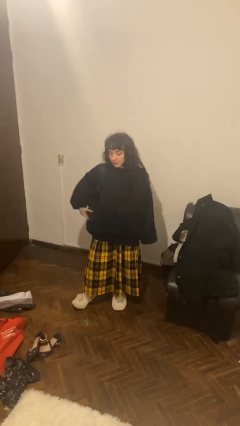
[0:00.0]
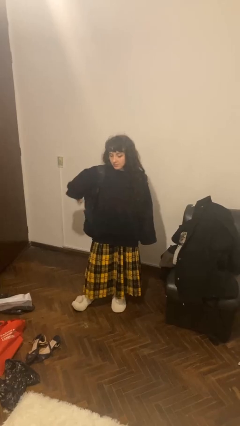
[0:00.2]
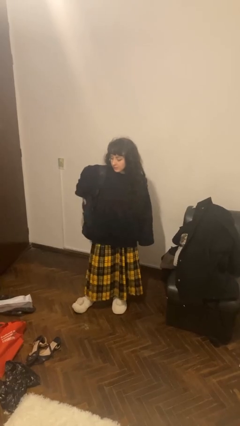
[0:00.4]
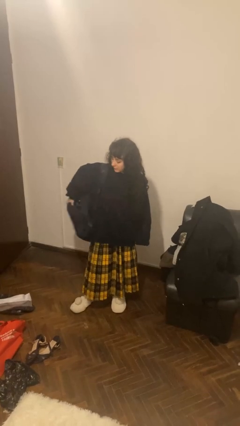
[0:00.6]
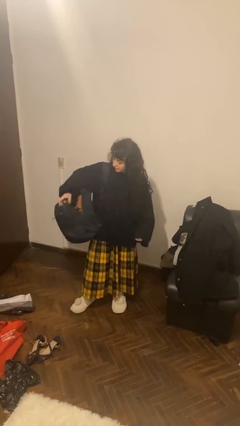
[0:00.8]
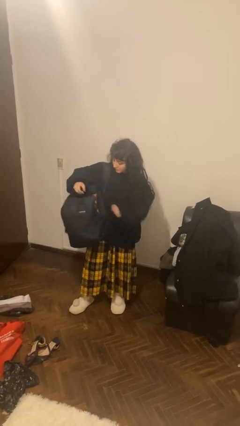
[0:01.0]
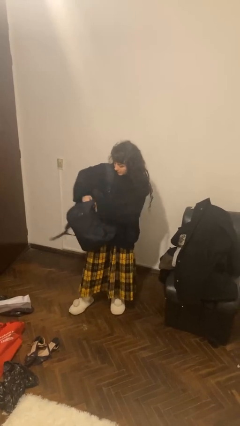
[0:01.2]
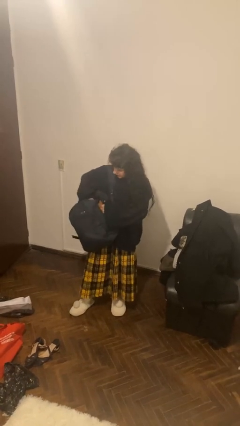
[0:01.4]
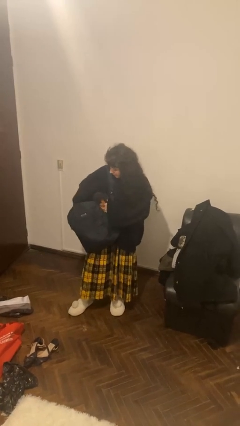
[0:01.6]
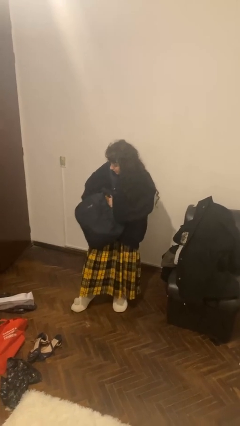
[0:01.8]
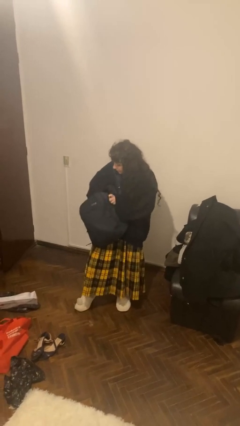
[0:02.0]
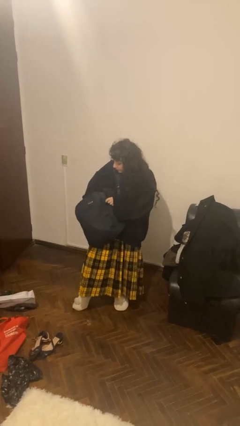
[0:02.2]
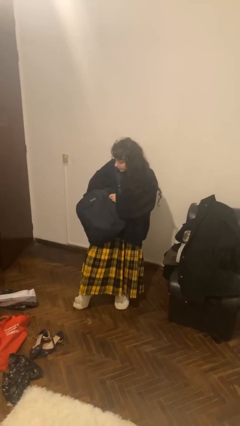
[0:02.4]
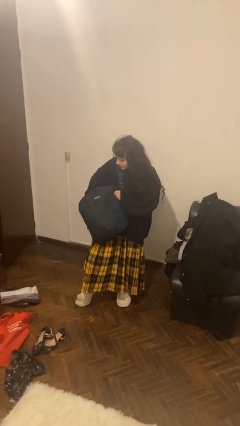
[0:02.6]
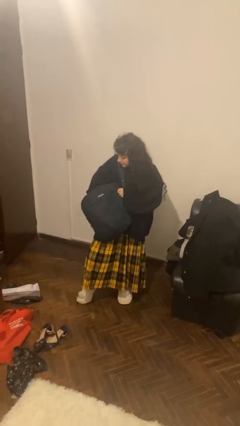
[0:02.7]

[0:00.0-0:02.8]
person searches in backpack

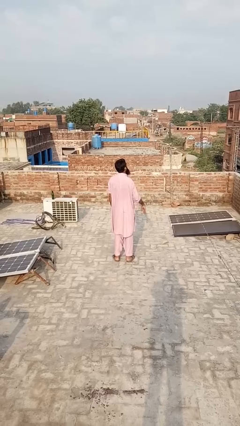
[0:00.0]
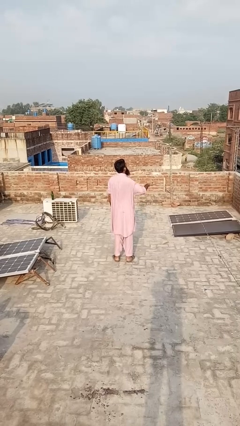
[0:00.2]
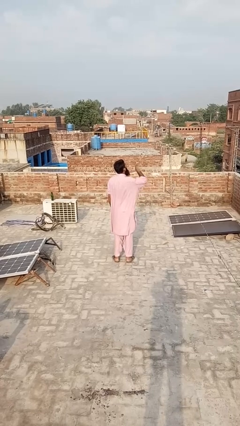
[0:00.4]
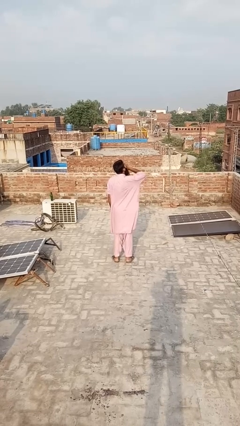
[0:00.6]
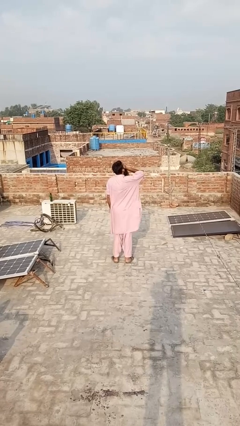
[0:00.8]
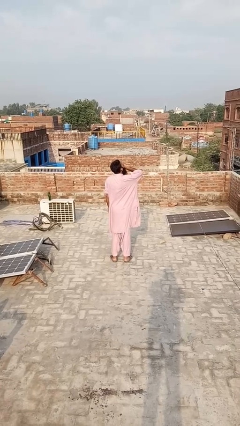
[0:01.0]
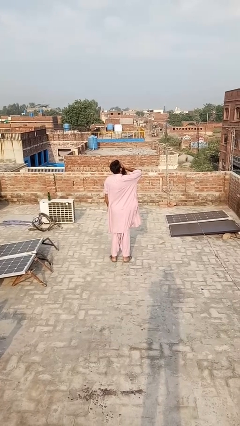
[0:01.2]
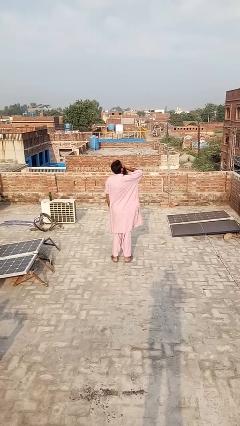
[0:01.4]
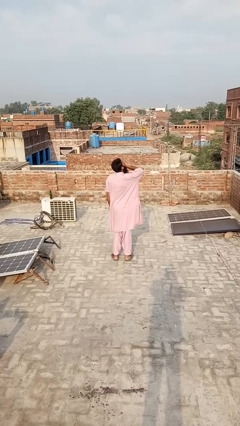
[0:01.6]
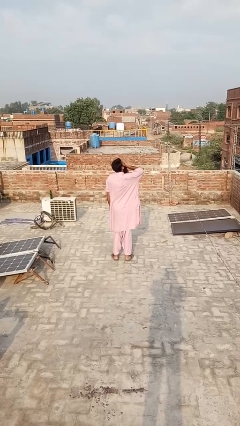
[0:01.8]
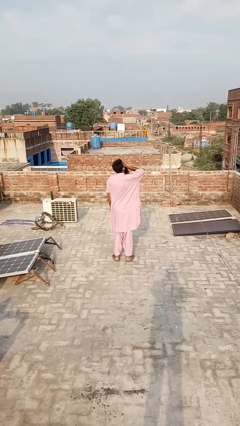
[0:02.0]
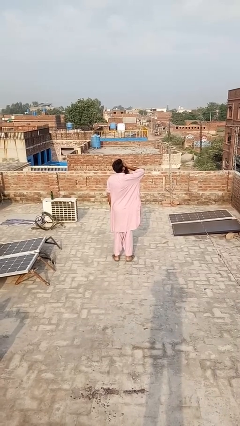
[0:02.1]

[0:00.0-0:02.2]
person yawns

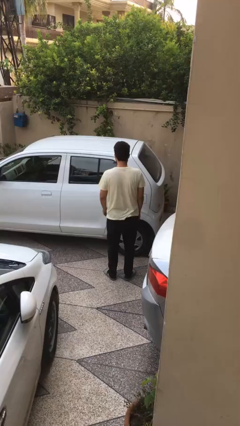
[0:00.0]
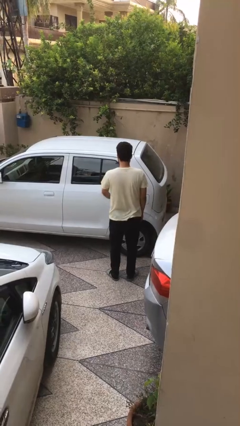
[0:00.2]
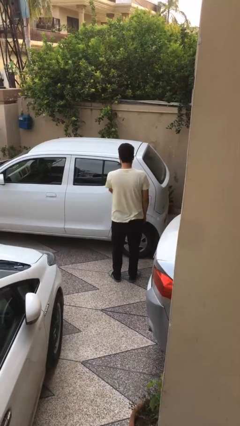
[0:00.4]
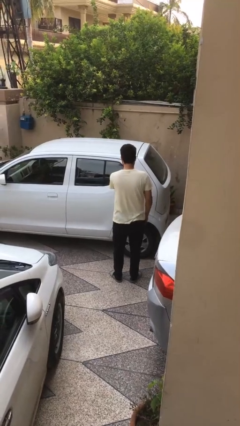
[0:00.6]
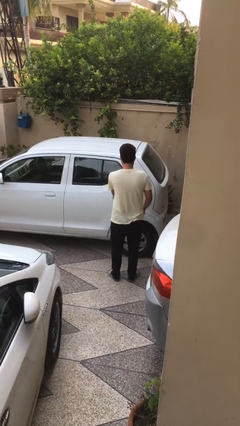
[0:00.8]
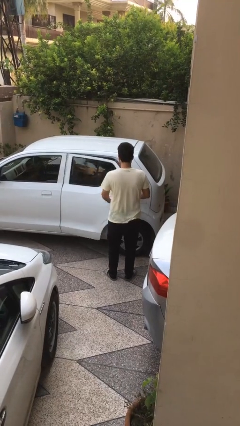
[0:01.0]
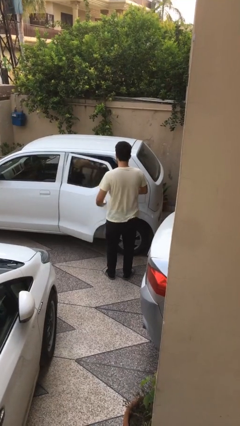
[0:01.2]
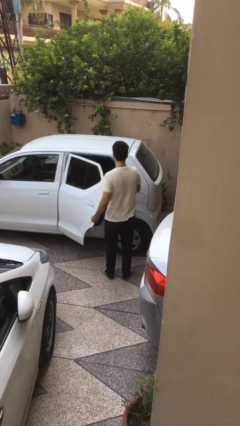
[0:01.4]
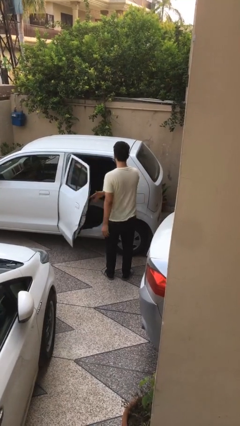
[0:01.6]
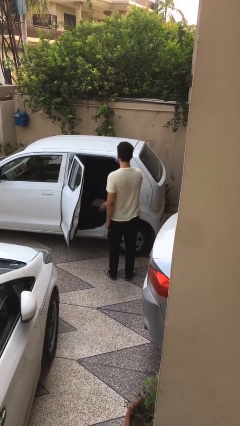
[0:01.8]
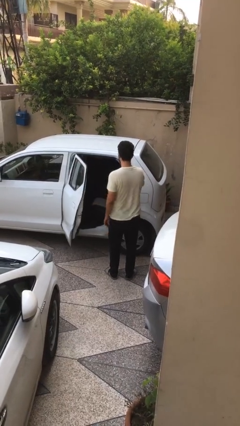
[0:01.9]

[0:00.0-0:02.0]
person opens car door

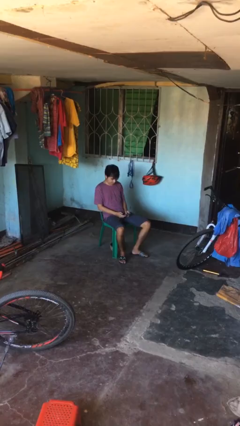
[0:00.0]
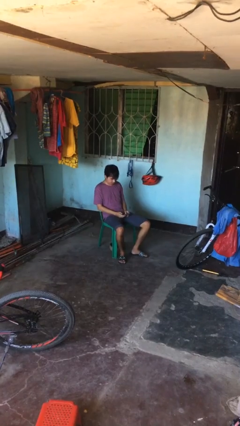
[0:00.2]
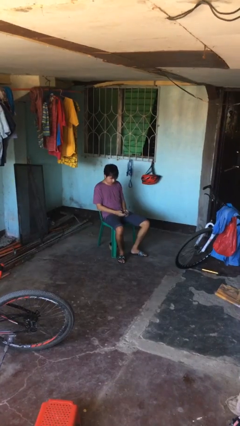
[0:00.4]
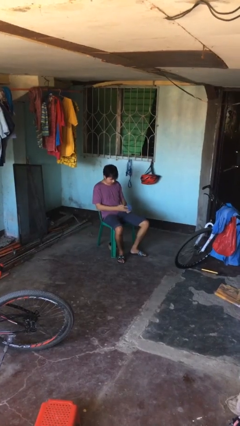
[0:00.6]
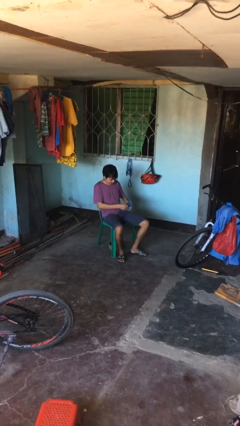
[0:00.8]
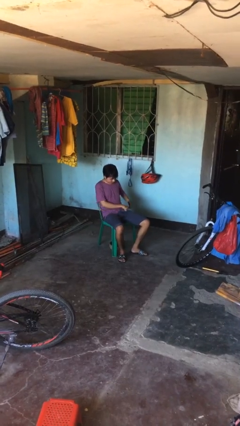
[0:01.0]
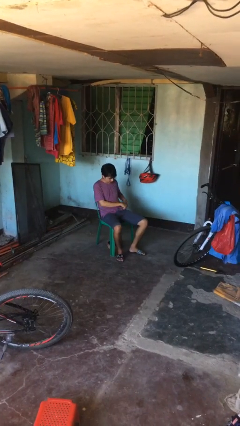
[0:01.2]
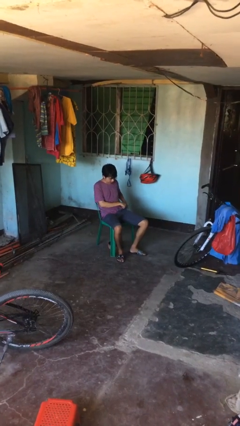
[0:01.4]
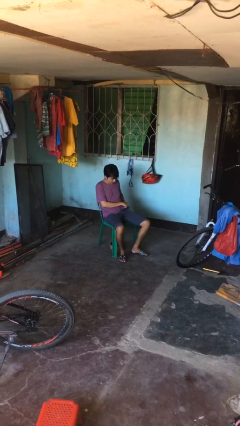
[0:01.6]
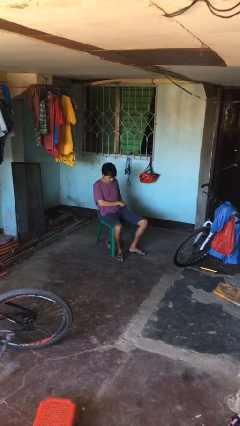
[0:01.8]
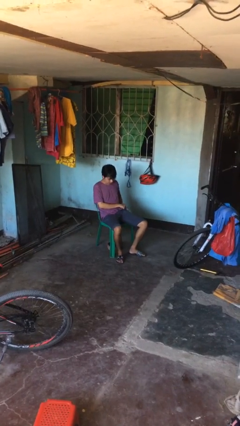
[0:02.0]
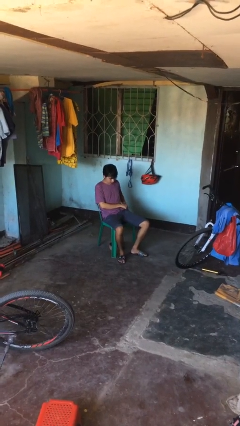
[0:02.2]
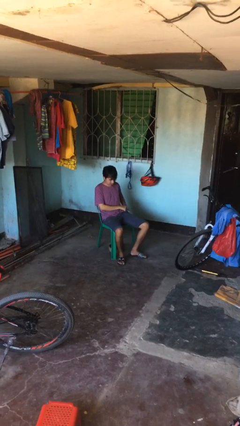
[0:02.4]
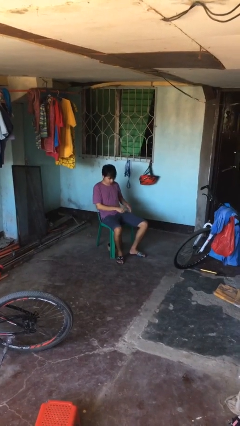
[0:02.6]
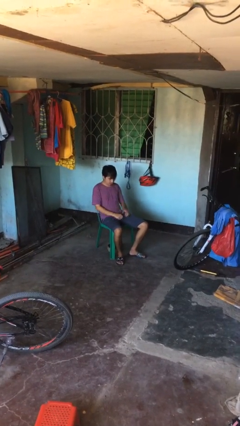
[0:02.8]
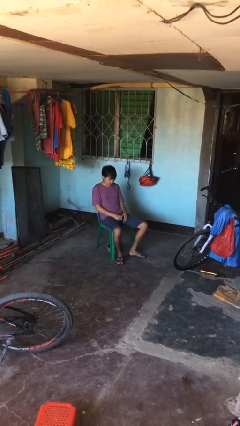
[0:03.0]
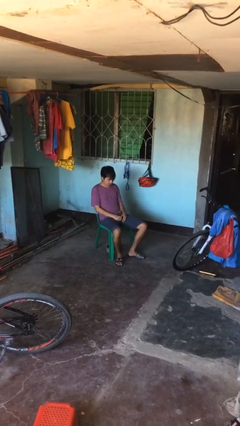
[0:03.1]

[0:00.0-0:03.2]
person puts phone into pocket

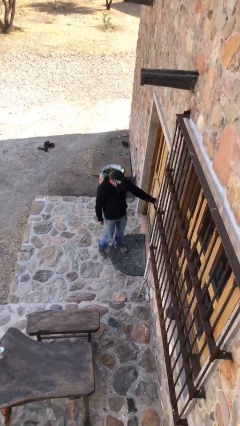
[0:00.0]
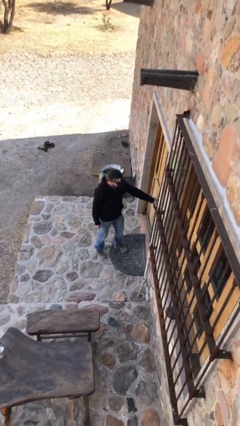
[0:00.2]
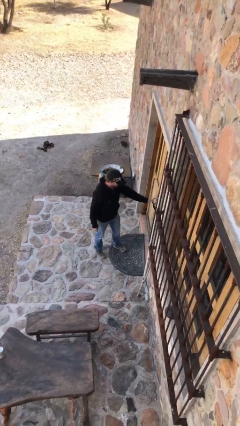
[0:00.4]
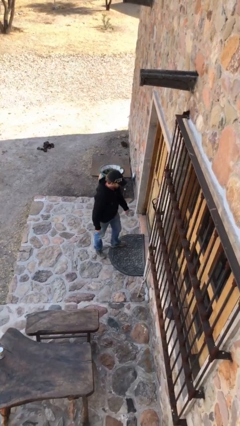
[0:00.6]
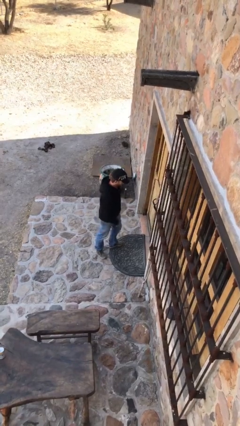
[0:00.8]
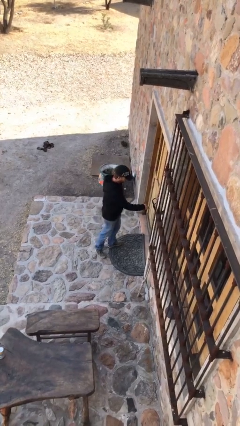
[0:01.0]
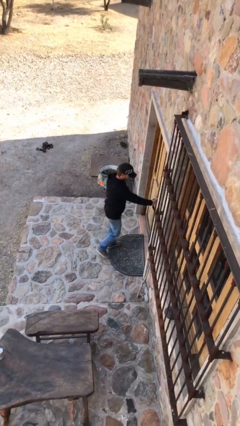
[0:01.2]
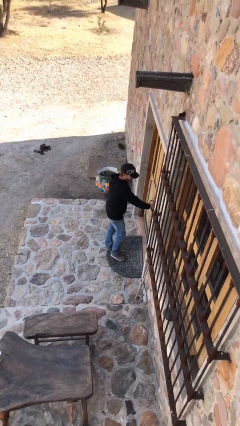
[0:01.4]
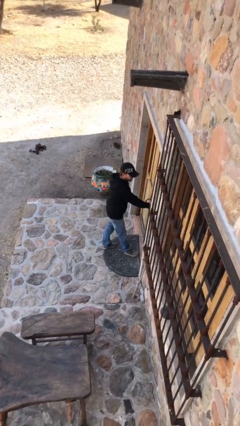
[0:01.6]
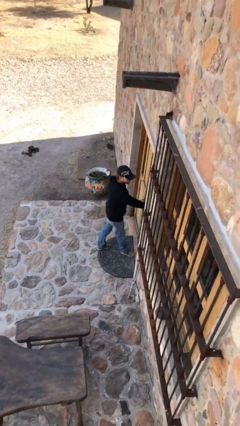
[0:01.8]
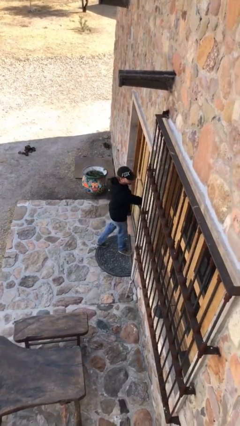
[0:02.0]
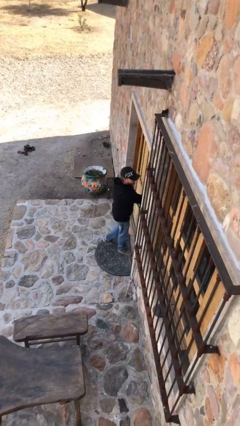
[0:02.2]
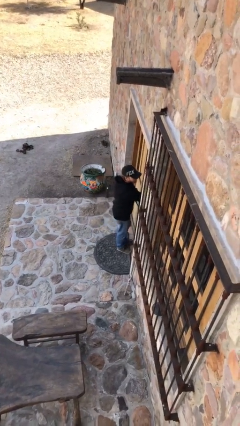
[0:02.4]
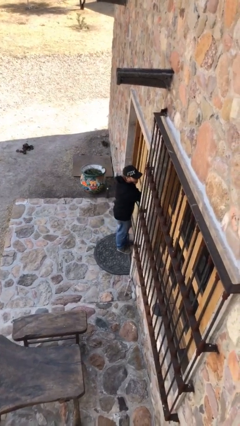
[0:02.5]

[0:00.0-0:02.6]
person opens facility door

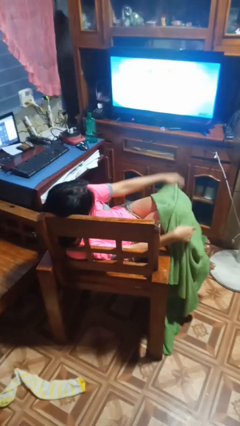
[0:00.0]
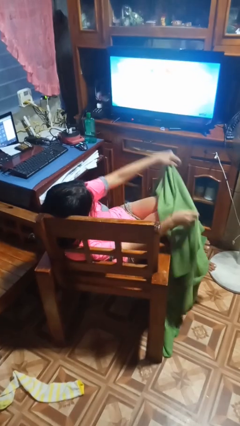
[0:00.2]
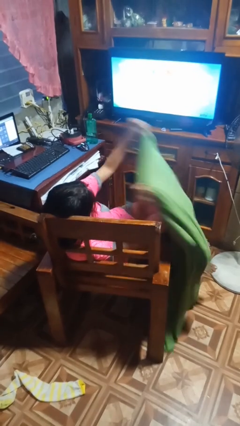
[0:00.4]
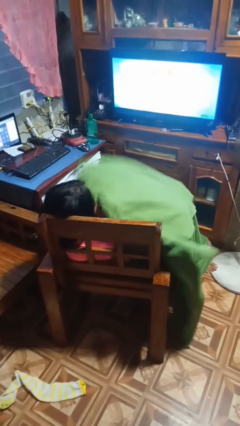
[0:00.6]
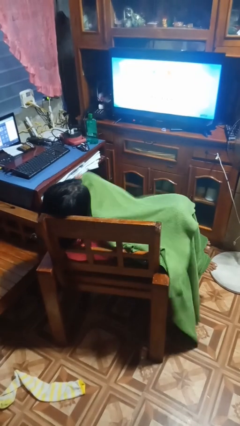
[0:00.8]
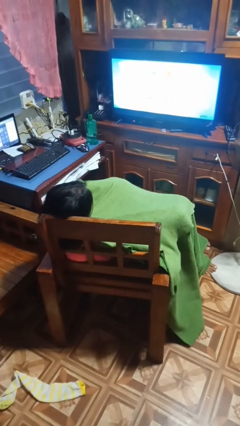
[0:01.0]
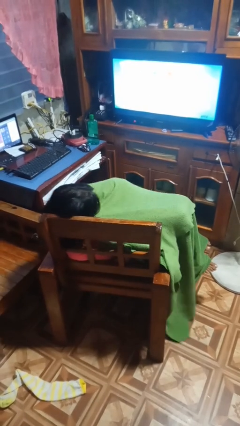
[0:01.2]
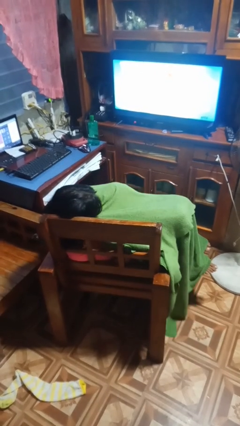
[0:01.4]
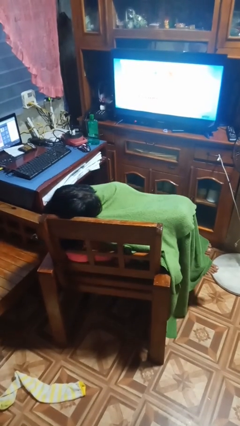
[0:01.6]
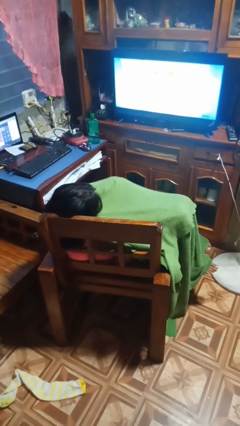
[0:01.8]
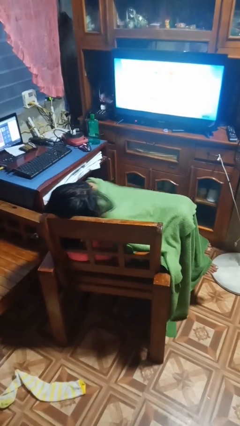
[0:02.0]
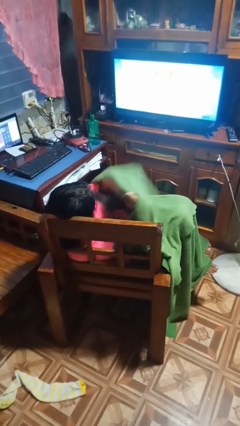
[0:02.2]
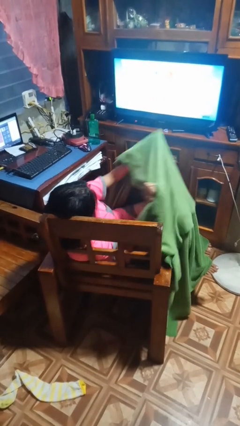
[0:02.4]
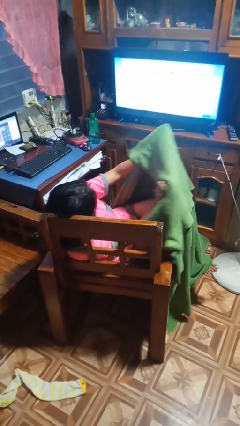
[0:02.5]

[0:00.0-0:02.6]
person covers with blanket

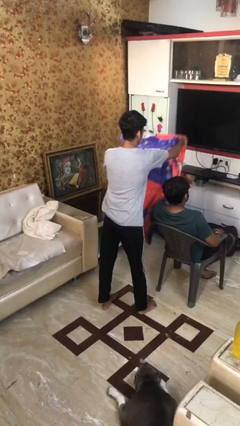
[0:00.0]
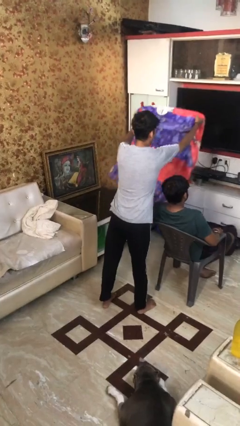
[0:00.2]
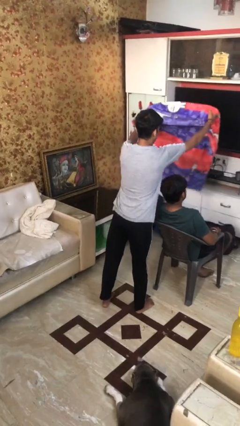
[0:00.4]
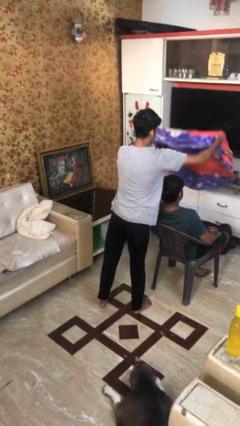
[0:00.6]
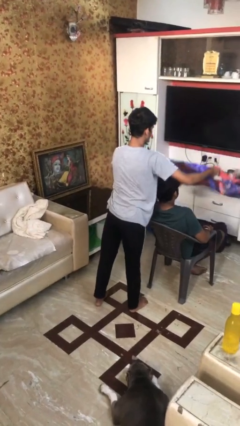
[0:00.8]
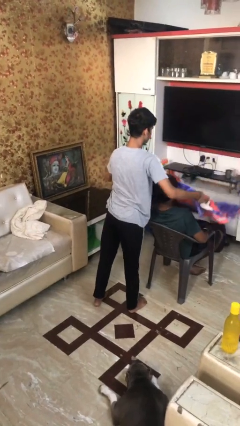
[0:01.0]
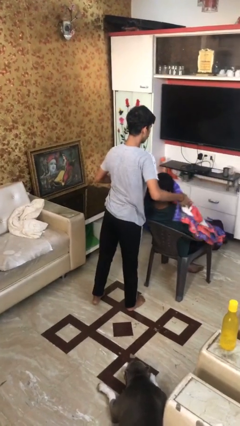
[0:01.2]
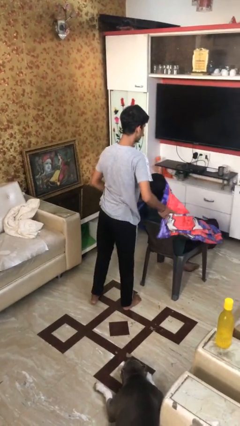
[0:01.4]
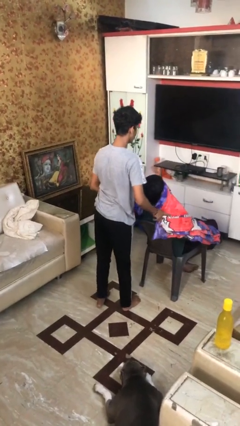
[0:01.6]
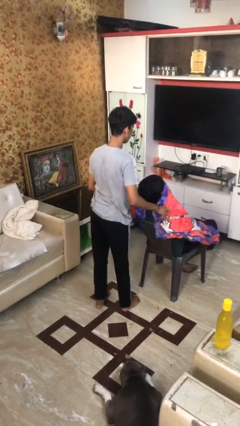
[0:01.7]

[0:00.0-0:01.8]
person covers friend with blanket
